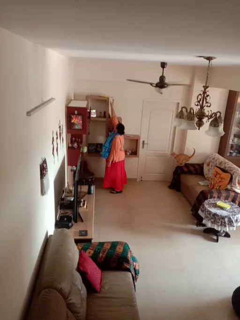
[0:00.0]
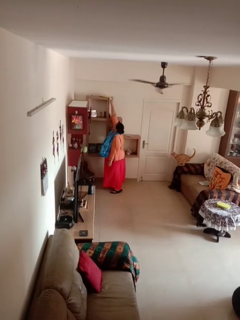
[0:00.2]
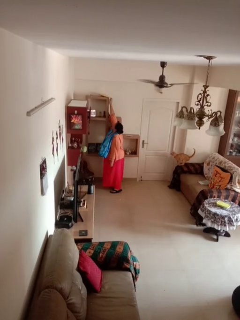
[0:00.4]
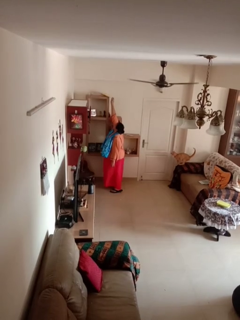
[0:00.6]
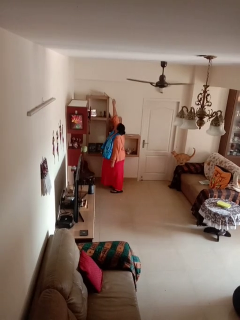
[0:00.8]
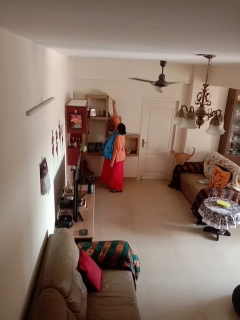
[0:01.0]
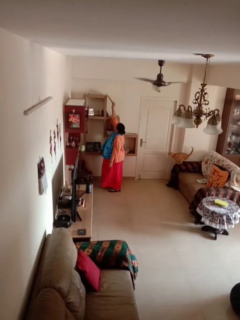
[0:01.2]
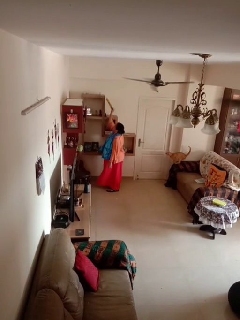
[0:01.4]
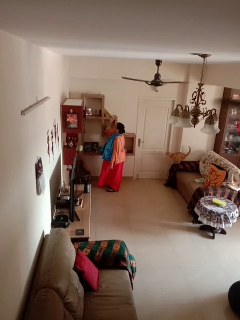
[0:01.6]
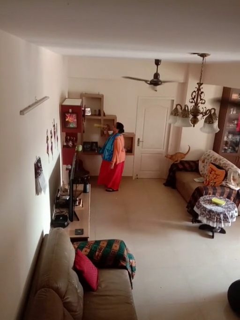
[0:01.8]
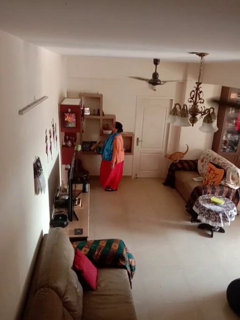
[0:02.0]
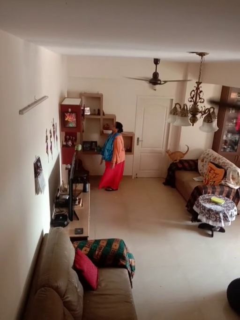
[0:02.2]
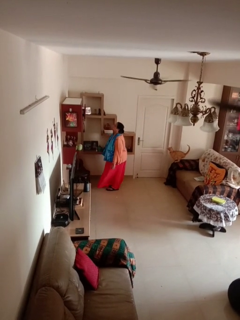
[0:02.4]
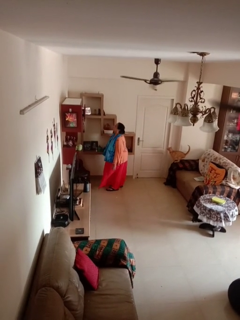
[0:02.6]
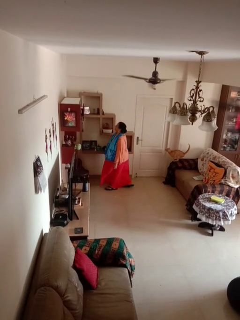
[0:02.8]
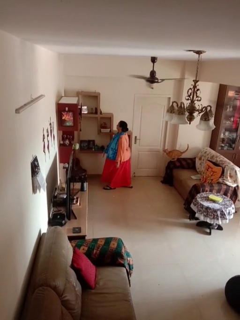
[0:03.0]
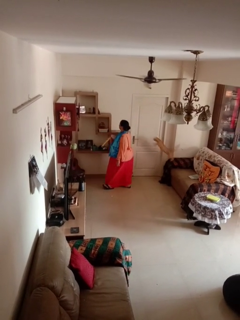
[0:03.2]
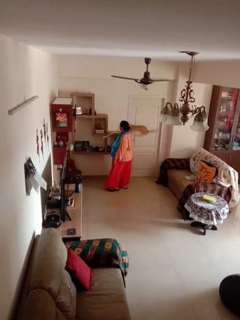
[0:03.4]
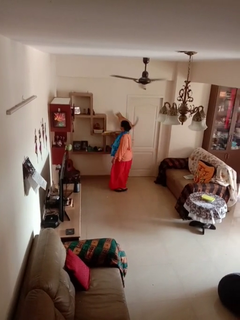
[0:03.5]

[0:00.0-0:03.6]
person picks up object from shelf

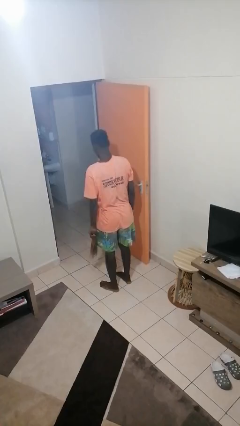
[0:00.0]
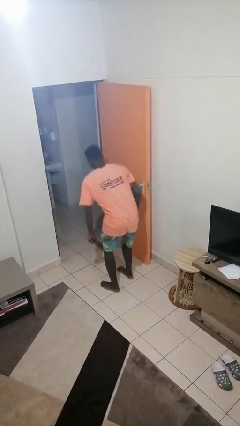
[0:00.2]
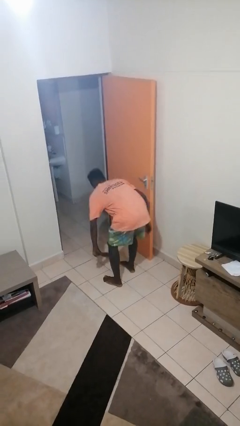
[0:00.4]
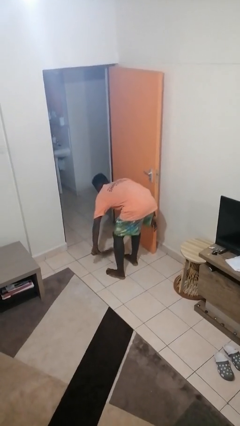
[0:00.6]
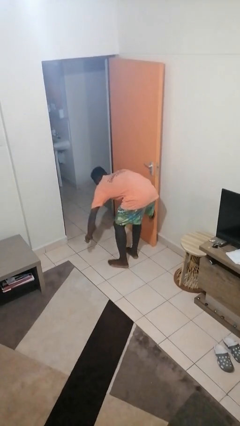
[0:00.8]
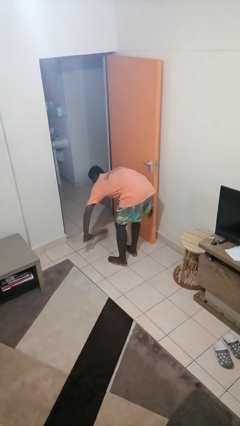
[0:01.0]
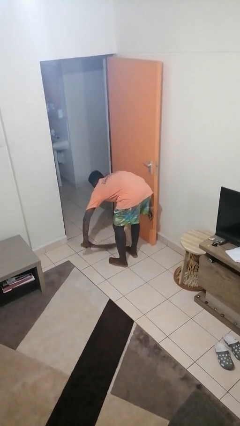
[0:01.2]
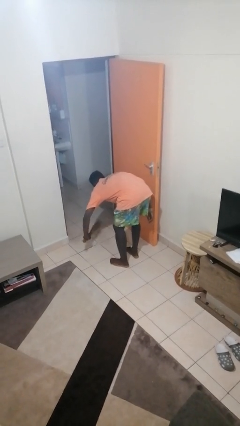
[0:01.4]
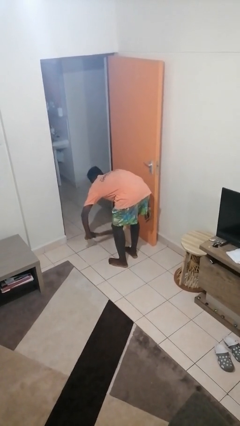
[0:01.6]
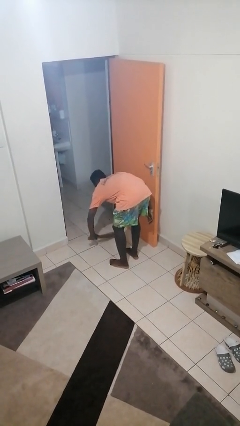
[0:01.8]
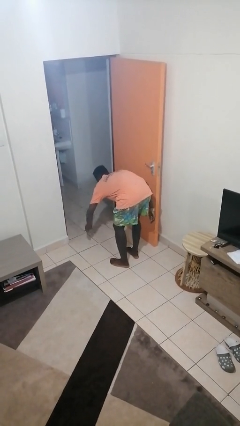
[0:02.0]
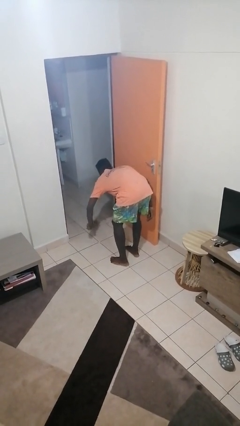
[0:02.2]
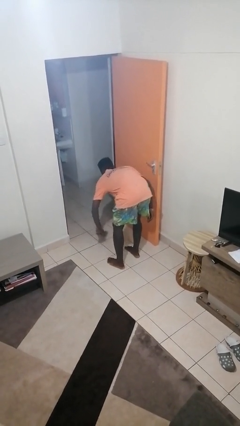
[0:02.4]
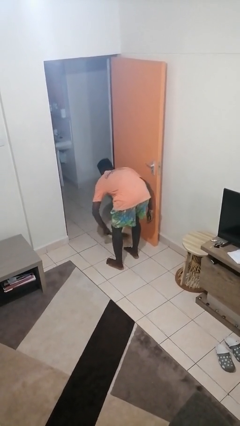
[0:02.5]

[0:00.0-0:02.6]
person sweeps floor

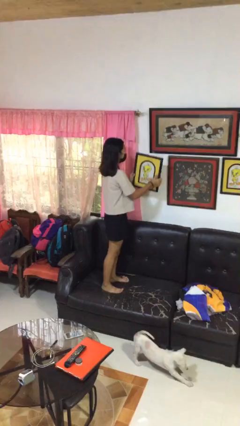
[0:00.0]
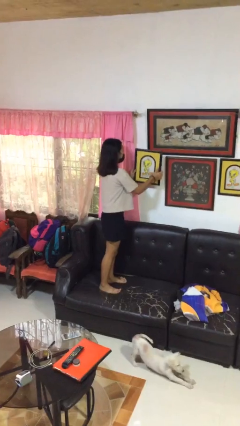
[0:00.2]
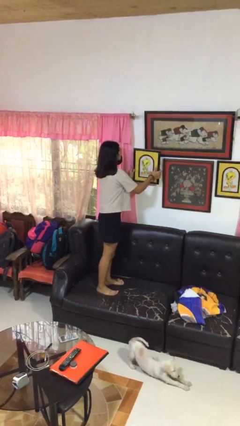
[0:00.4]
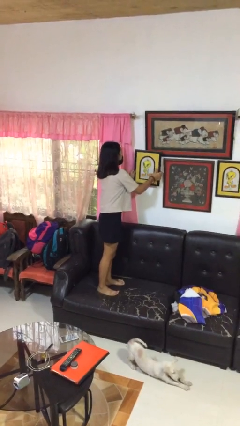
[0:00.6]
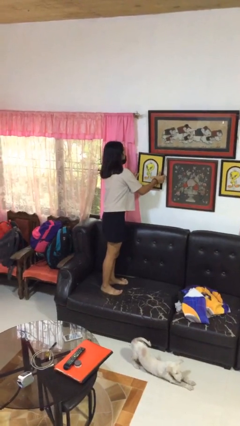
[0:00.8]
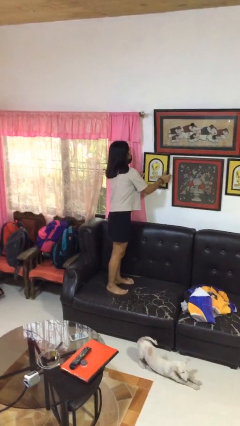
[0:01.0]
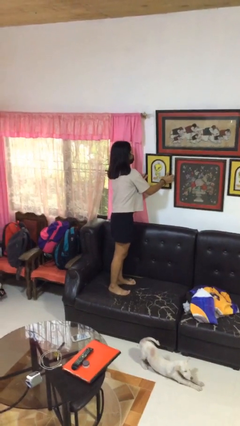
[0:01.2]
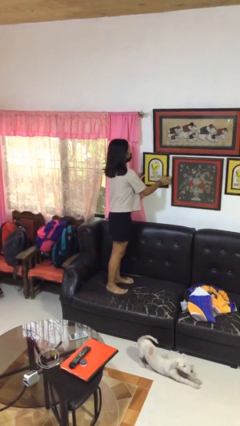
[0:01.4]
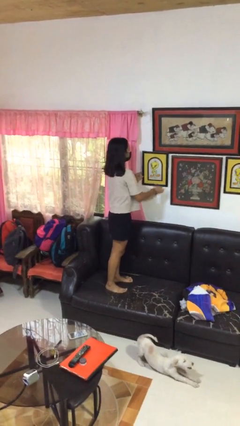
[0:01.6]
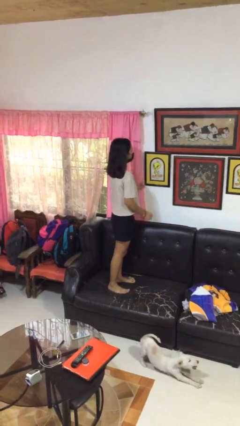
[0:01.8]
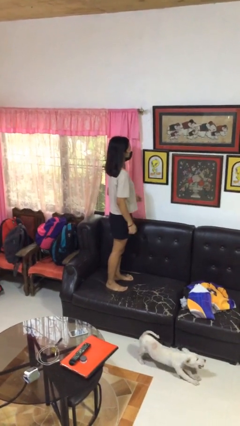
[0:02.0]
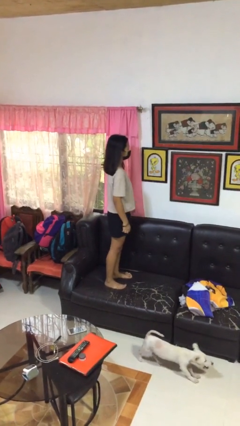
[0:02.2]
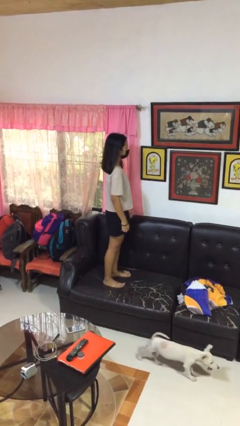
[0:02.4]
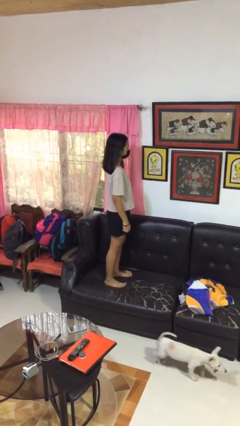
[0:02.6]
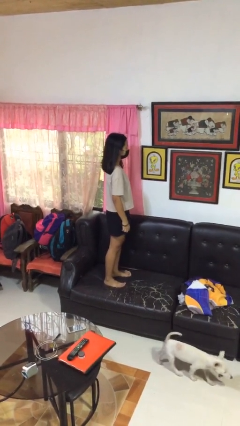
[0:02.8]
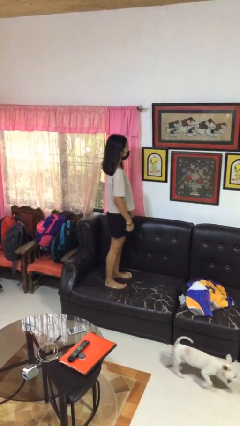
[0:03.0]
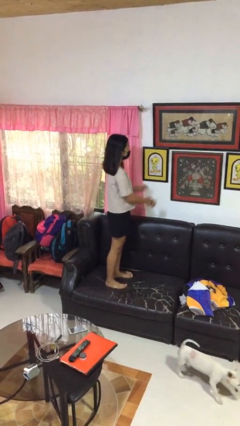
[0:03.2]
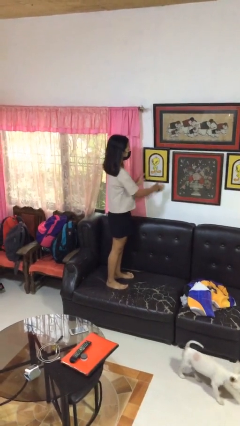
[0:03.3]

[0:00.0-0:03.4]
person puts up picture frame

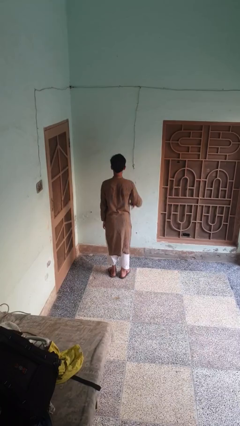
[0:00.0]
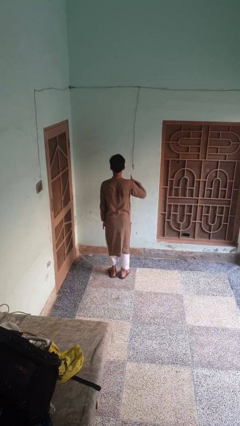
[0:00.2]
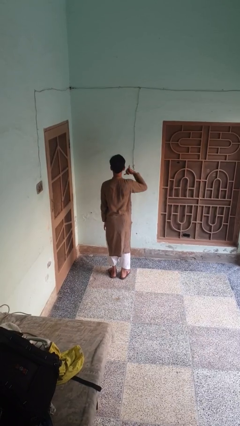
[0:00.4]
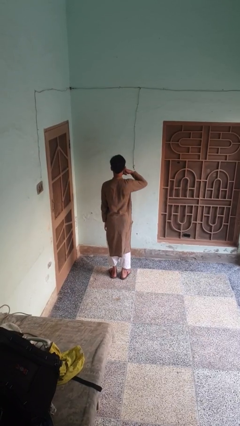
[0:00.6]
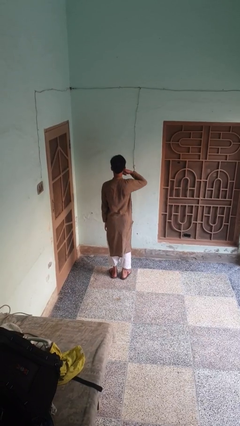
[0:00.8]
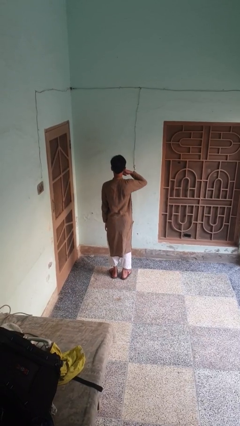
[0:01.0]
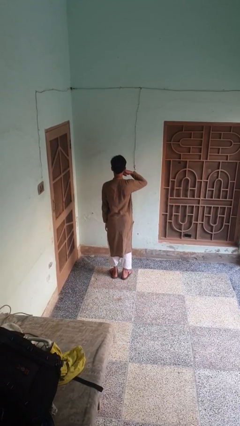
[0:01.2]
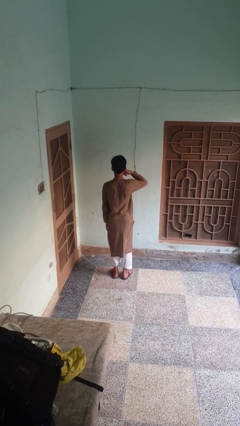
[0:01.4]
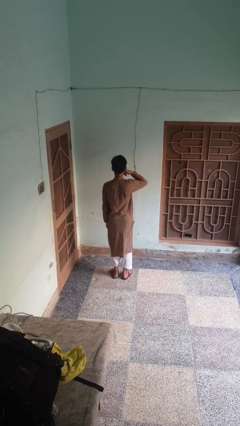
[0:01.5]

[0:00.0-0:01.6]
person gestures call me

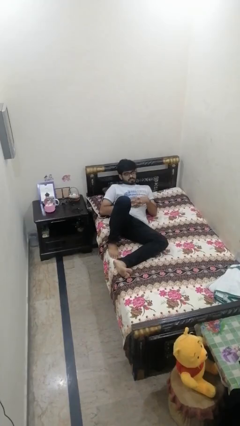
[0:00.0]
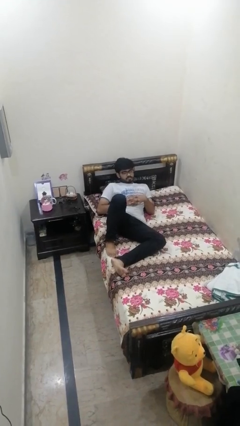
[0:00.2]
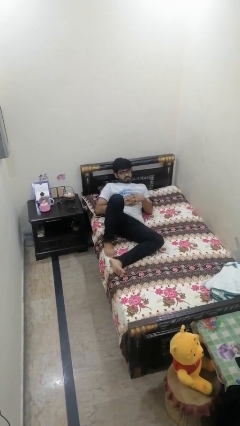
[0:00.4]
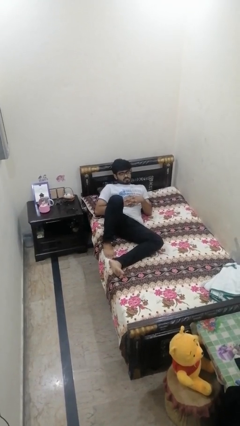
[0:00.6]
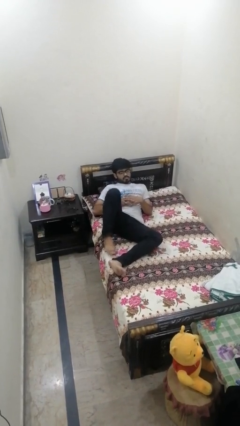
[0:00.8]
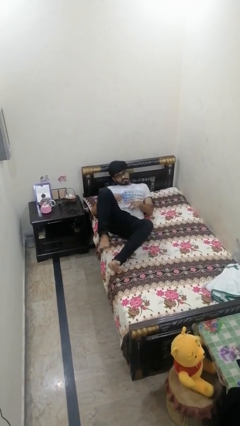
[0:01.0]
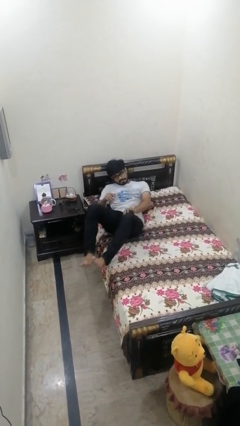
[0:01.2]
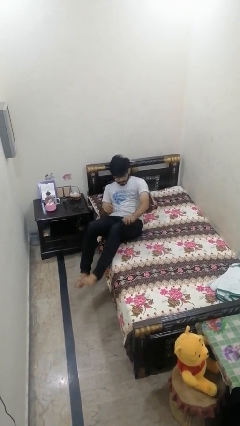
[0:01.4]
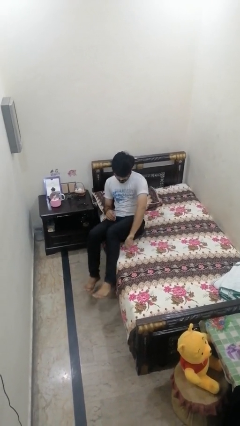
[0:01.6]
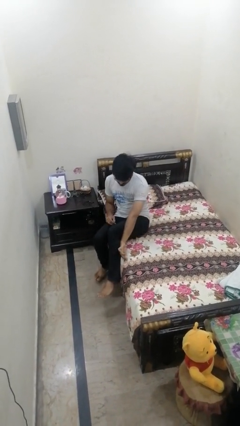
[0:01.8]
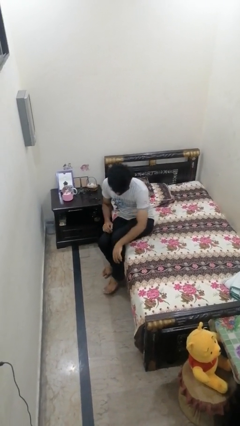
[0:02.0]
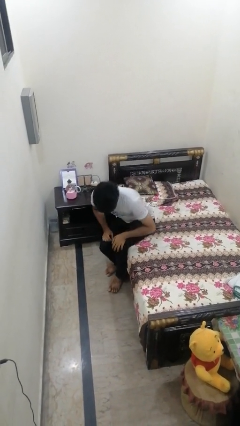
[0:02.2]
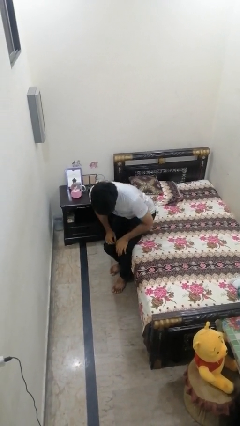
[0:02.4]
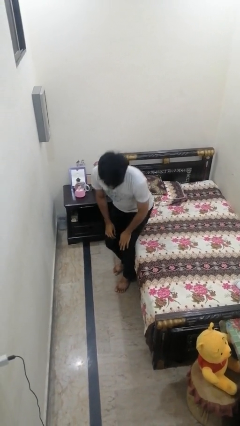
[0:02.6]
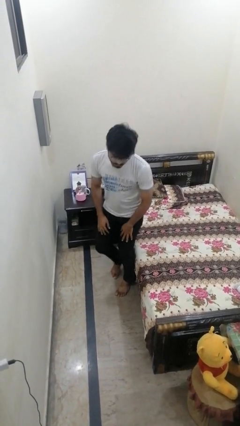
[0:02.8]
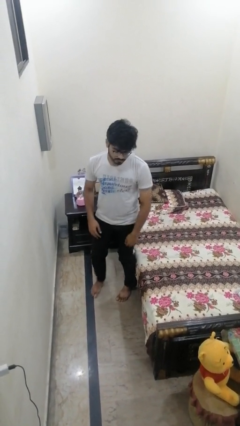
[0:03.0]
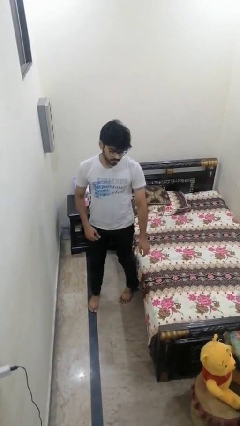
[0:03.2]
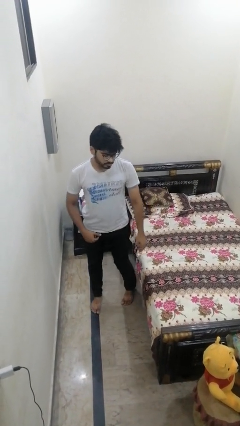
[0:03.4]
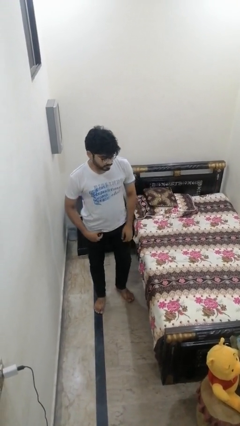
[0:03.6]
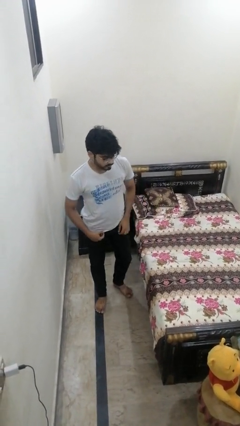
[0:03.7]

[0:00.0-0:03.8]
person stands up

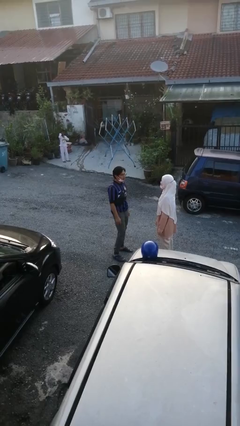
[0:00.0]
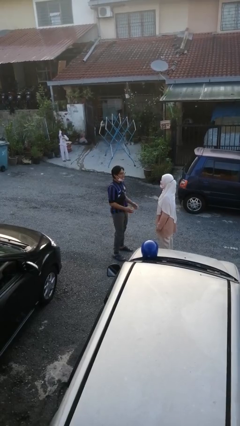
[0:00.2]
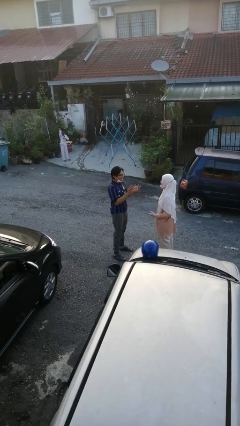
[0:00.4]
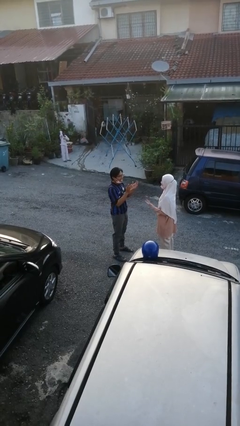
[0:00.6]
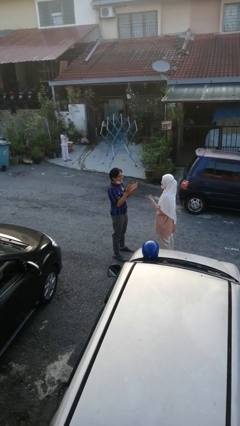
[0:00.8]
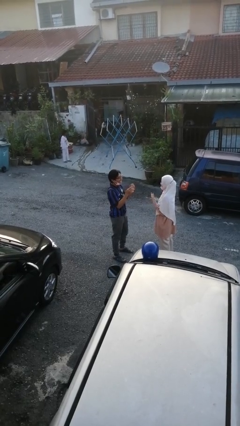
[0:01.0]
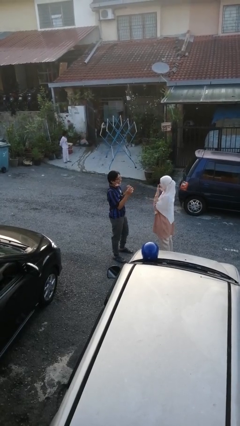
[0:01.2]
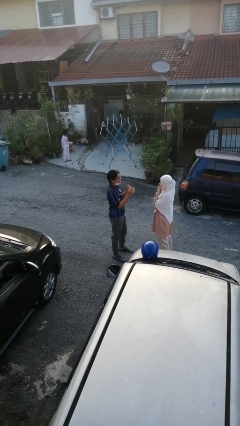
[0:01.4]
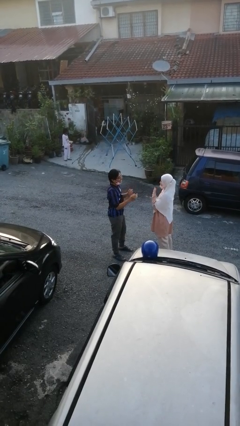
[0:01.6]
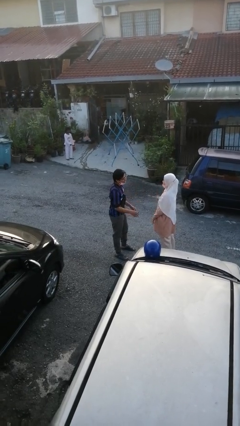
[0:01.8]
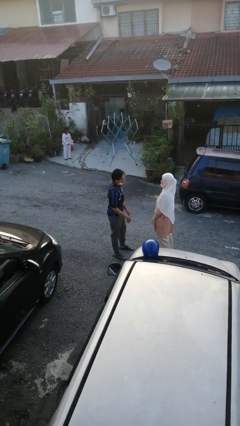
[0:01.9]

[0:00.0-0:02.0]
person laughs with person

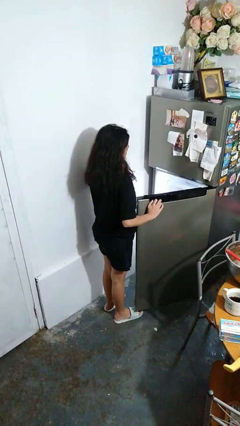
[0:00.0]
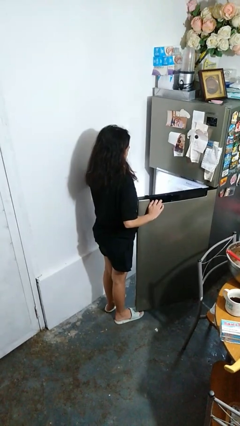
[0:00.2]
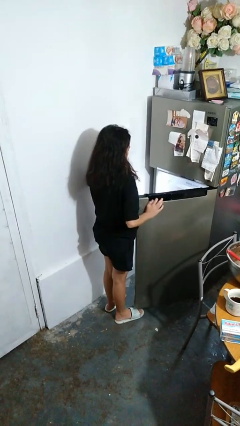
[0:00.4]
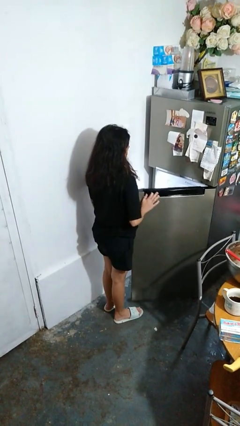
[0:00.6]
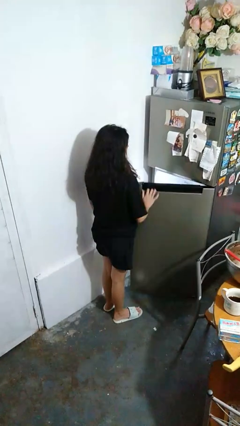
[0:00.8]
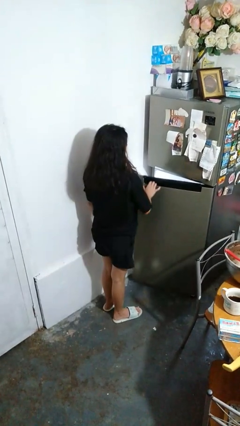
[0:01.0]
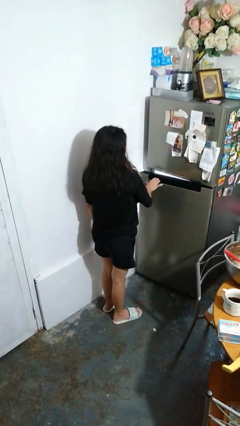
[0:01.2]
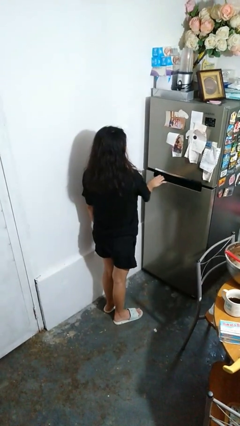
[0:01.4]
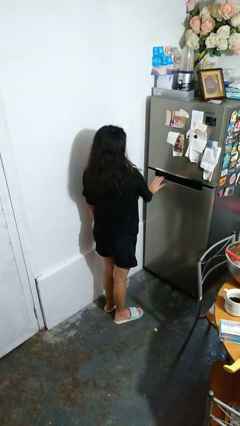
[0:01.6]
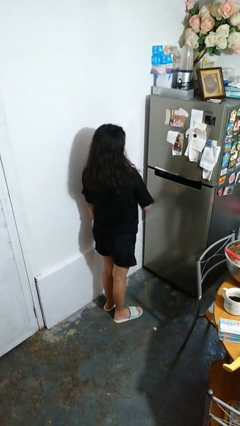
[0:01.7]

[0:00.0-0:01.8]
person closes refrigerator
